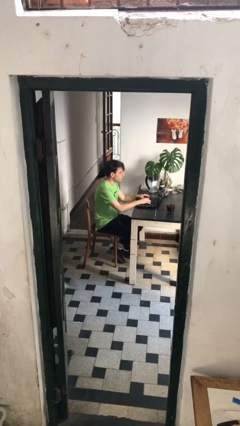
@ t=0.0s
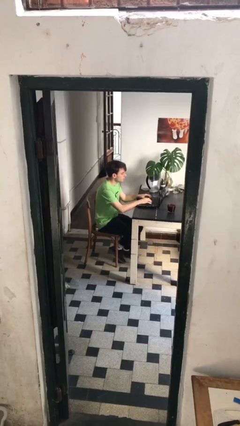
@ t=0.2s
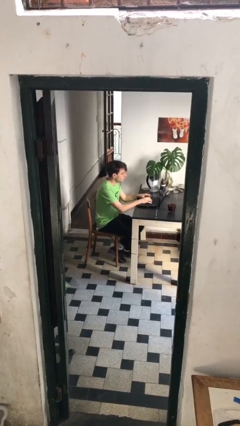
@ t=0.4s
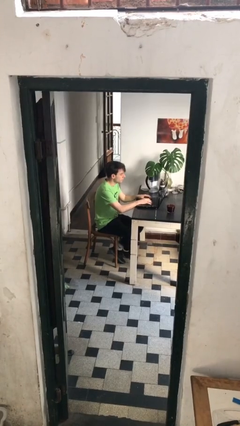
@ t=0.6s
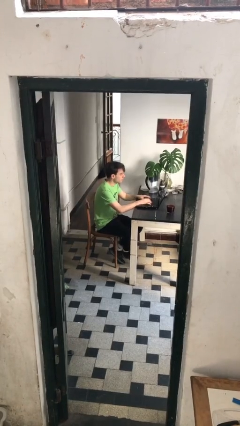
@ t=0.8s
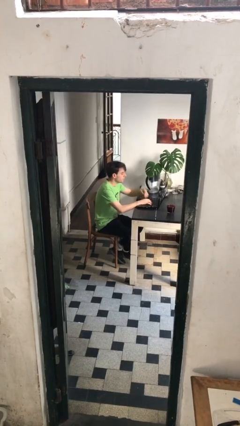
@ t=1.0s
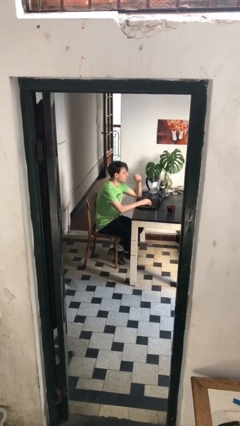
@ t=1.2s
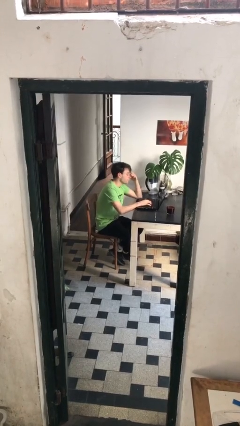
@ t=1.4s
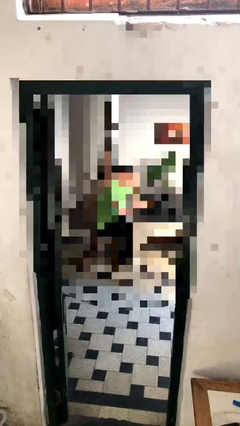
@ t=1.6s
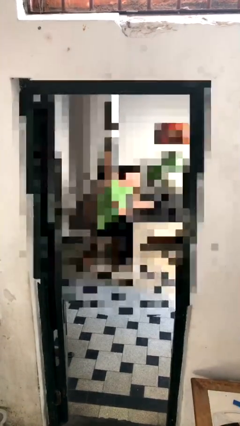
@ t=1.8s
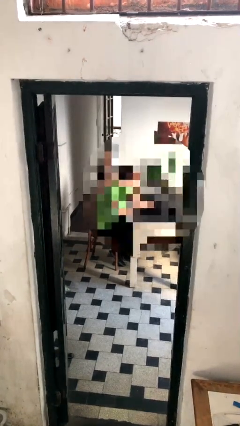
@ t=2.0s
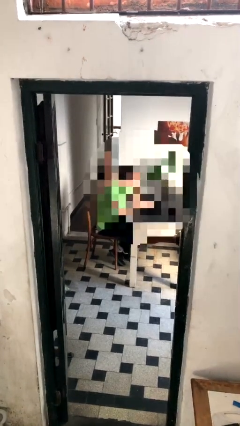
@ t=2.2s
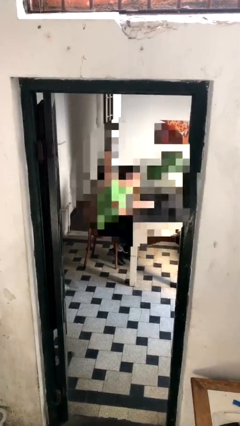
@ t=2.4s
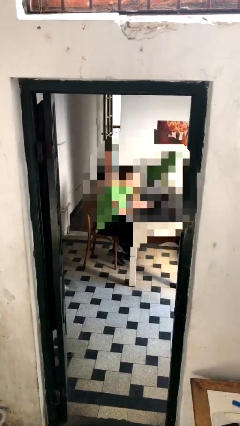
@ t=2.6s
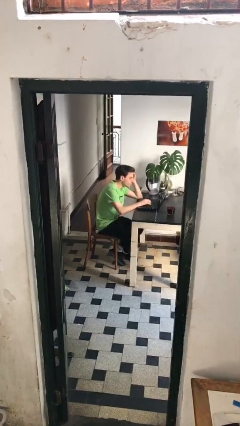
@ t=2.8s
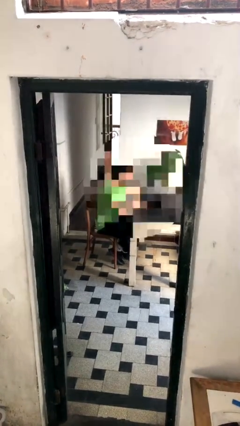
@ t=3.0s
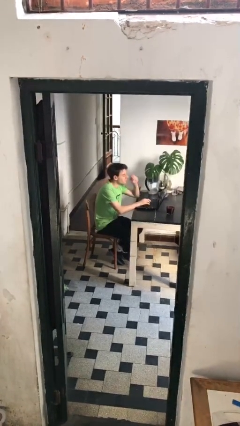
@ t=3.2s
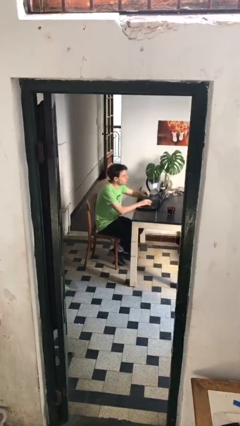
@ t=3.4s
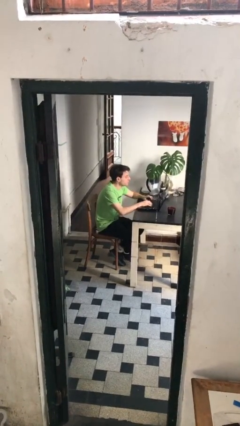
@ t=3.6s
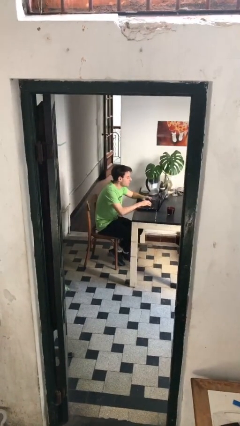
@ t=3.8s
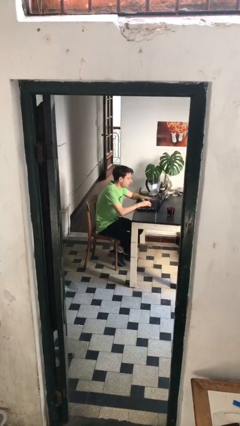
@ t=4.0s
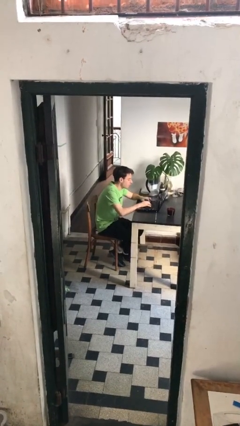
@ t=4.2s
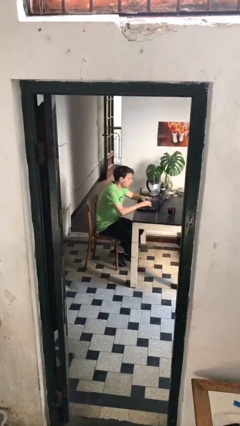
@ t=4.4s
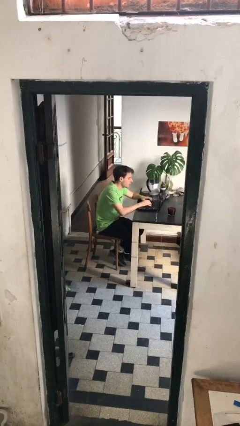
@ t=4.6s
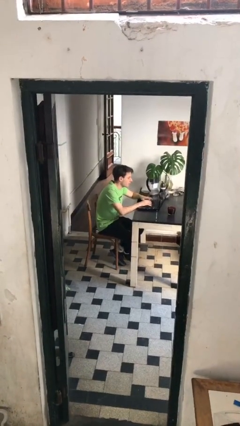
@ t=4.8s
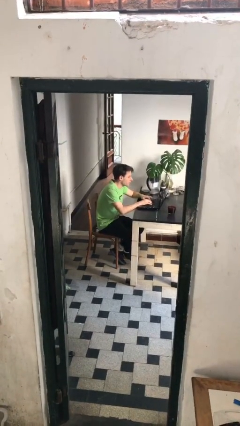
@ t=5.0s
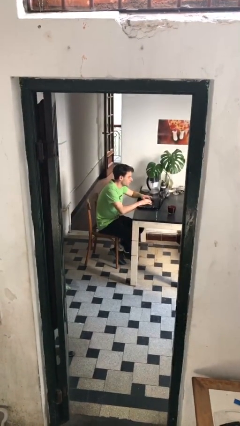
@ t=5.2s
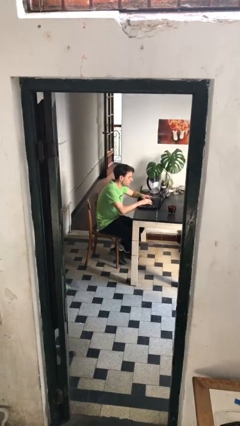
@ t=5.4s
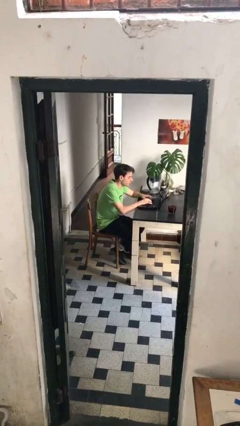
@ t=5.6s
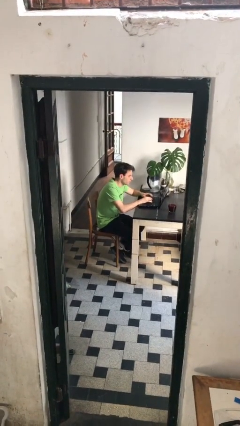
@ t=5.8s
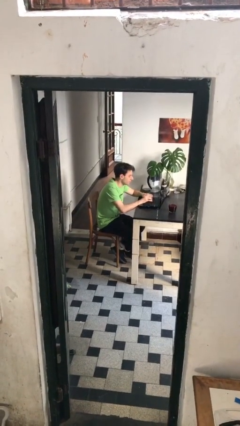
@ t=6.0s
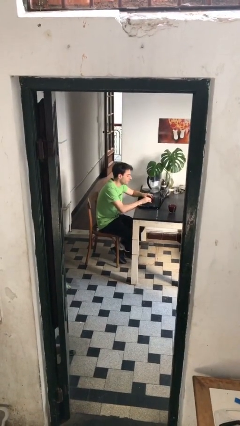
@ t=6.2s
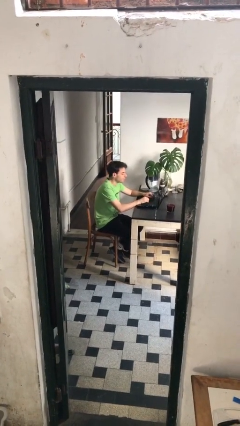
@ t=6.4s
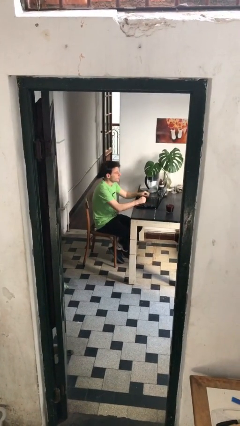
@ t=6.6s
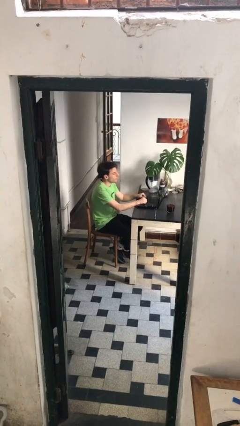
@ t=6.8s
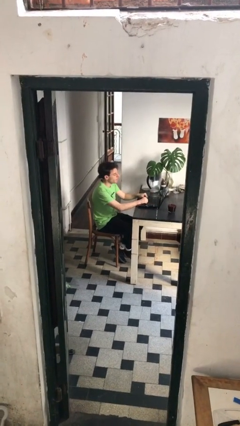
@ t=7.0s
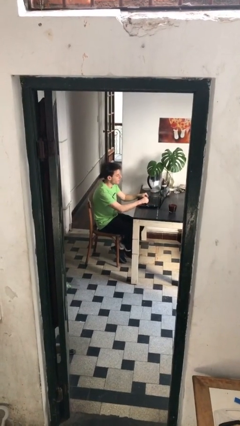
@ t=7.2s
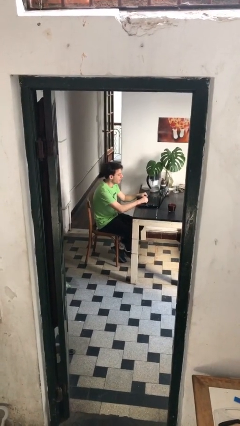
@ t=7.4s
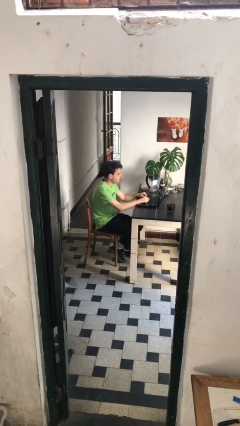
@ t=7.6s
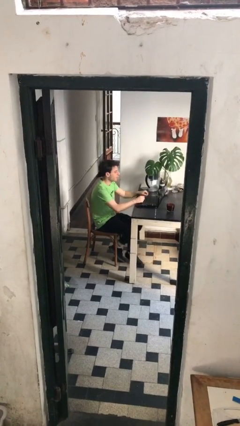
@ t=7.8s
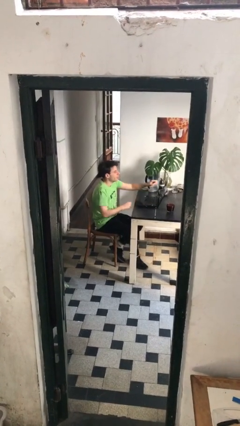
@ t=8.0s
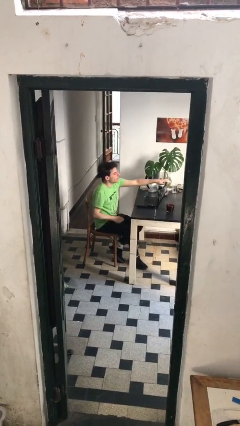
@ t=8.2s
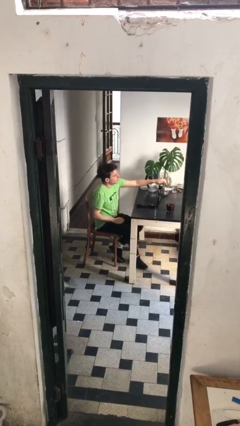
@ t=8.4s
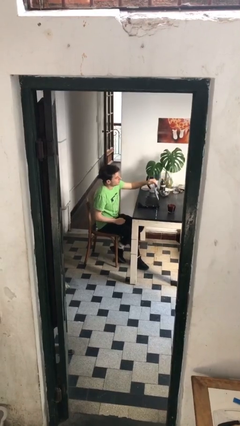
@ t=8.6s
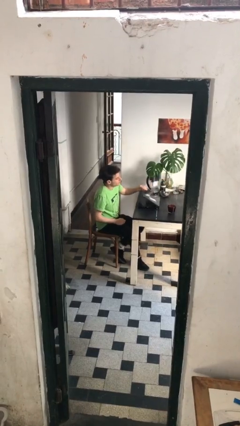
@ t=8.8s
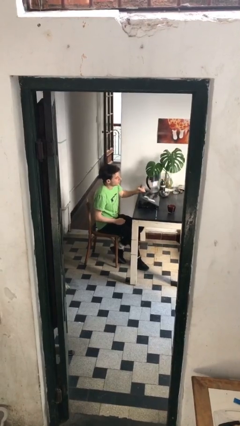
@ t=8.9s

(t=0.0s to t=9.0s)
person interacts with laptop

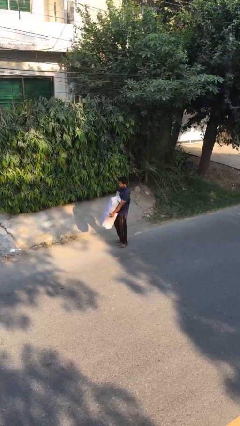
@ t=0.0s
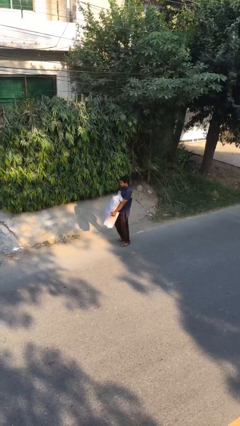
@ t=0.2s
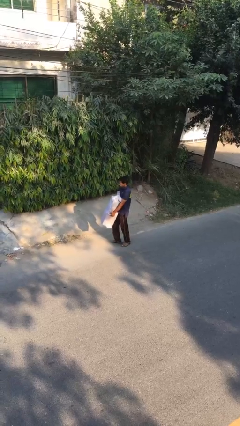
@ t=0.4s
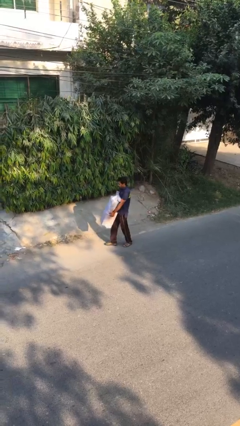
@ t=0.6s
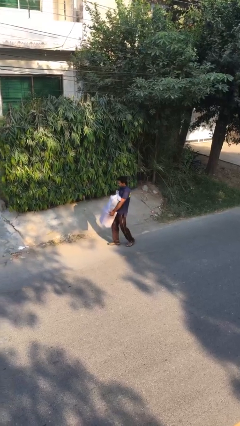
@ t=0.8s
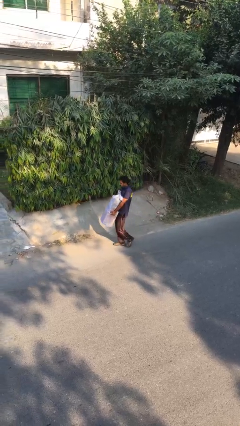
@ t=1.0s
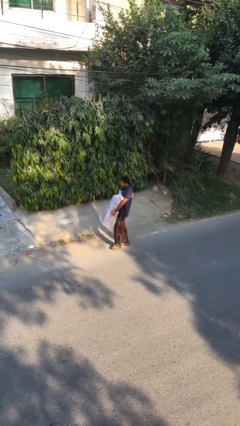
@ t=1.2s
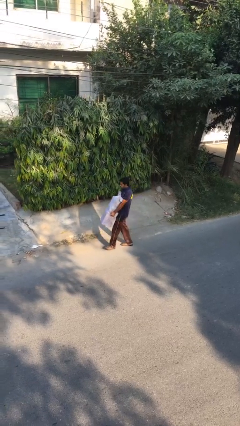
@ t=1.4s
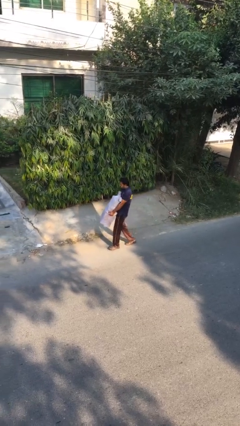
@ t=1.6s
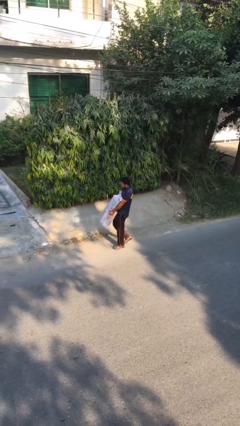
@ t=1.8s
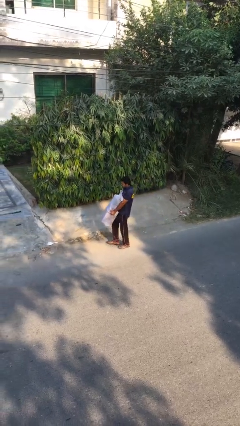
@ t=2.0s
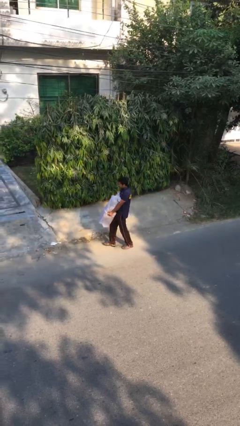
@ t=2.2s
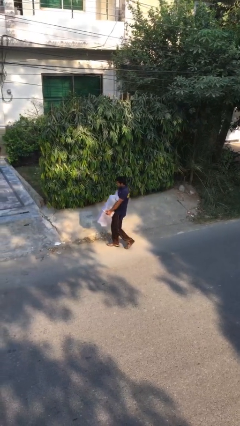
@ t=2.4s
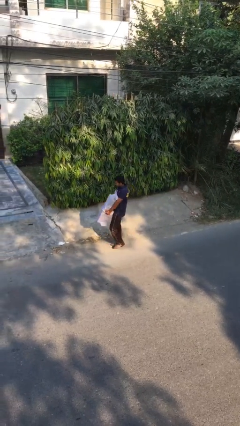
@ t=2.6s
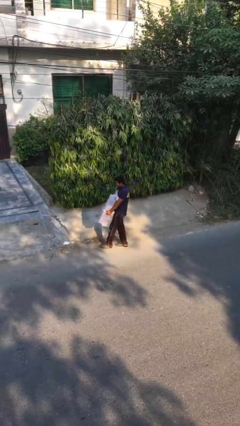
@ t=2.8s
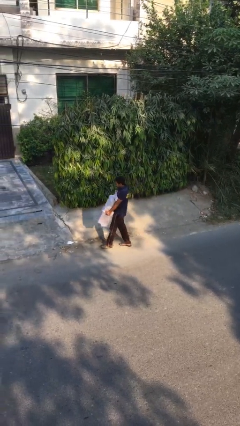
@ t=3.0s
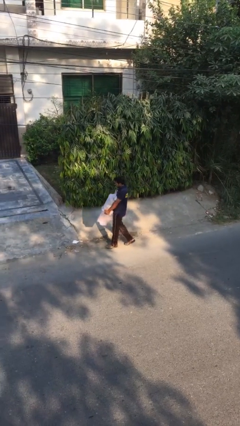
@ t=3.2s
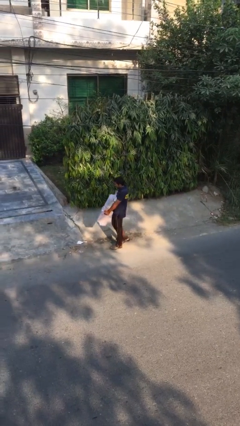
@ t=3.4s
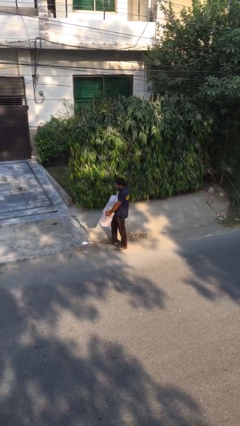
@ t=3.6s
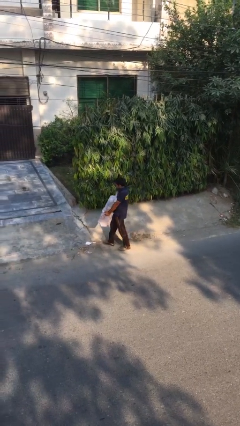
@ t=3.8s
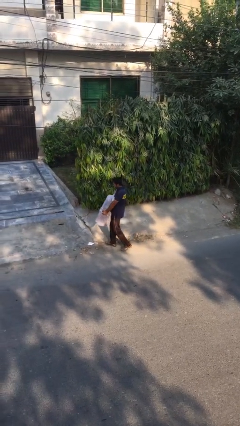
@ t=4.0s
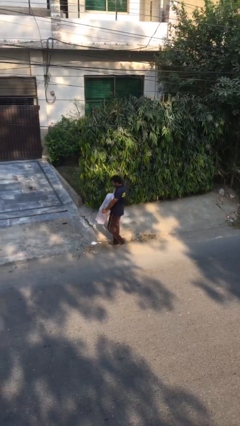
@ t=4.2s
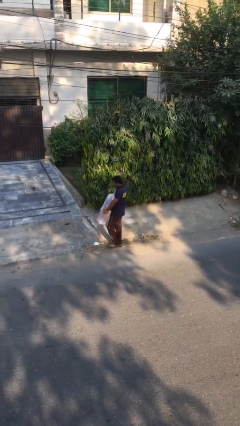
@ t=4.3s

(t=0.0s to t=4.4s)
person carries heavy object

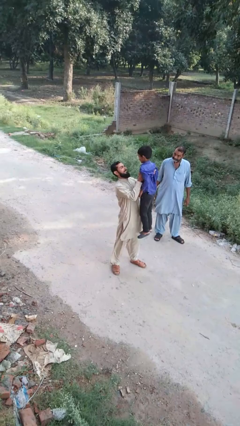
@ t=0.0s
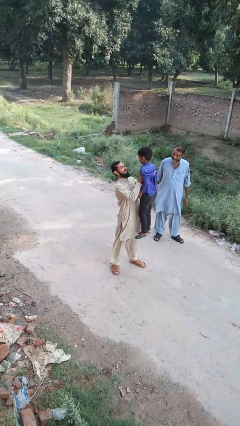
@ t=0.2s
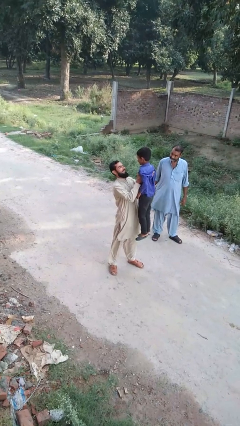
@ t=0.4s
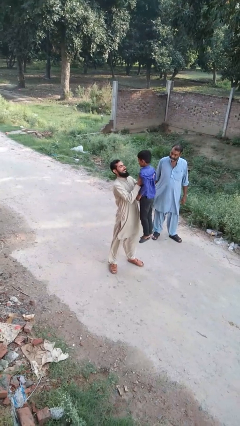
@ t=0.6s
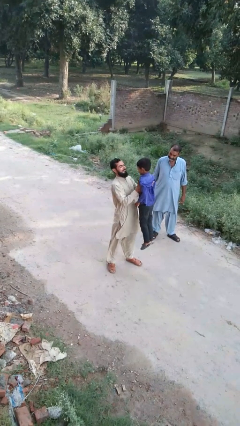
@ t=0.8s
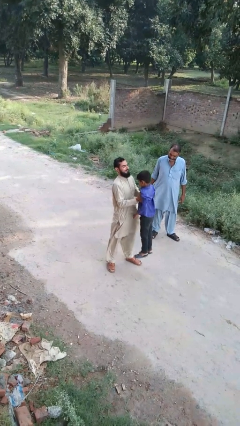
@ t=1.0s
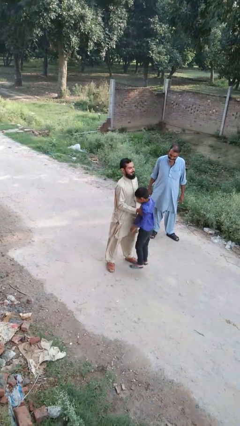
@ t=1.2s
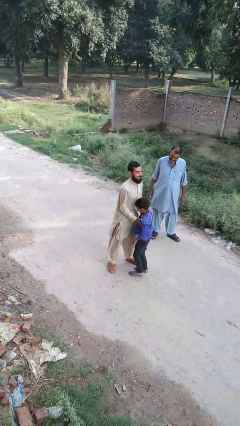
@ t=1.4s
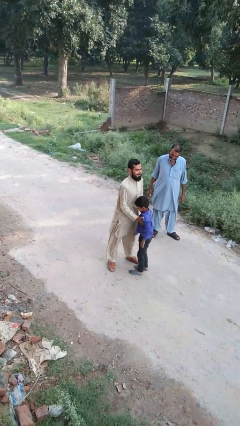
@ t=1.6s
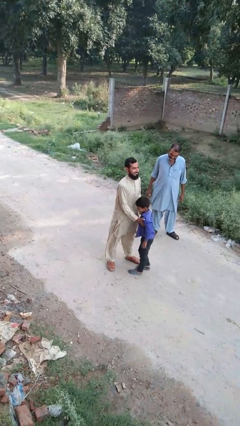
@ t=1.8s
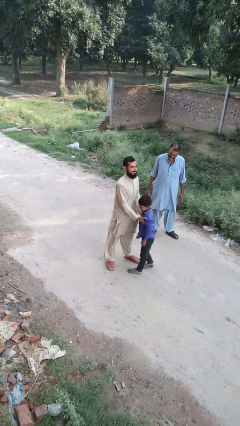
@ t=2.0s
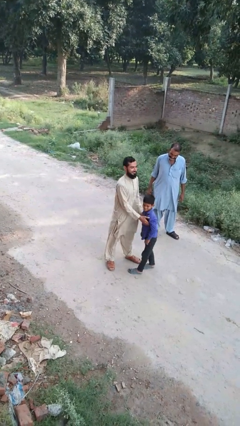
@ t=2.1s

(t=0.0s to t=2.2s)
person puts down person

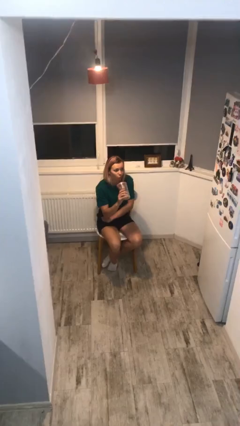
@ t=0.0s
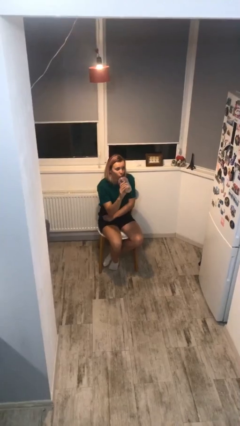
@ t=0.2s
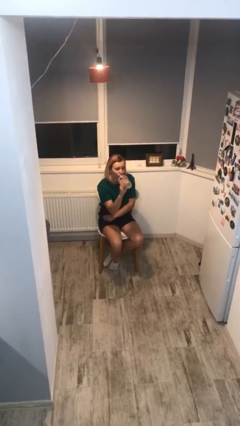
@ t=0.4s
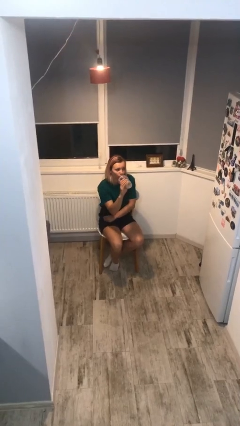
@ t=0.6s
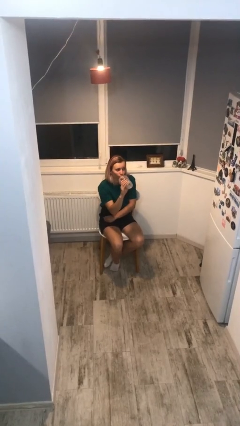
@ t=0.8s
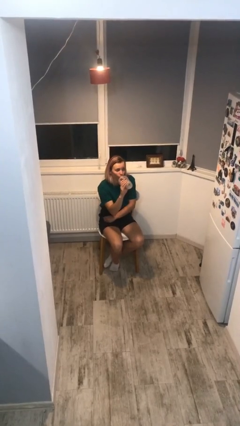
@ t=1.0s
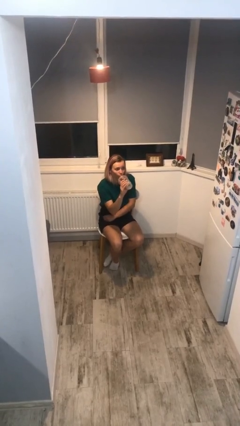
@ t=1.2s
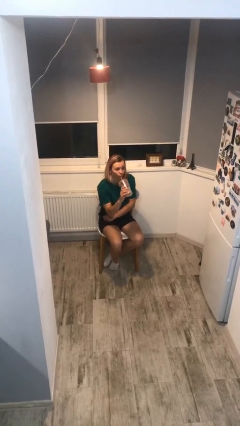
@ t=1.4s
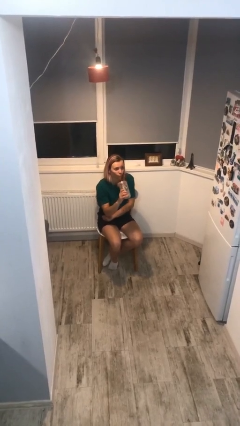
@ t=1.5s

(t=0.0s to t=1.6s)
person drinks from straw

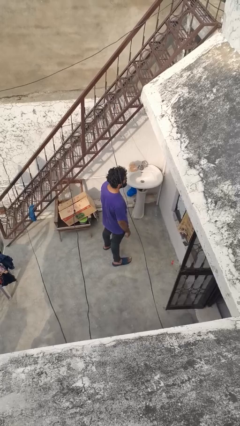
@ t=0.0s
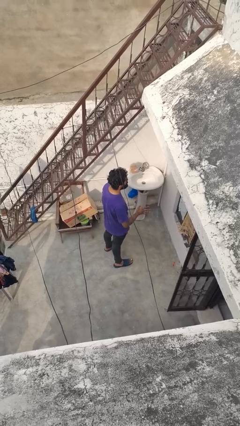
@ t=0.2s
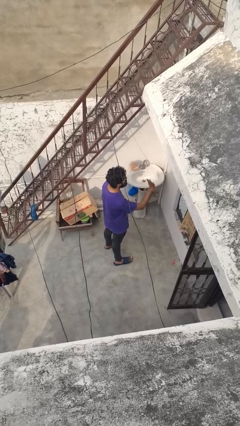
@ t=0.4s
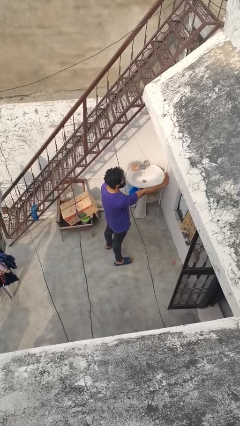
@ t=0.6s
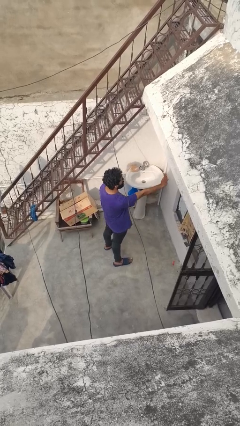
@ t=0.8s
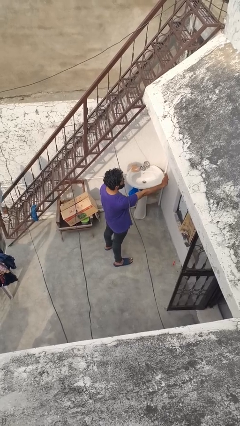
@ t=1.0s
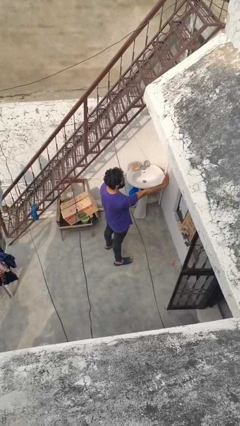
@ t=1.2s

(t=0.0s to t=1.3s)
person gestures stop
